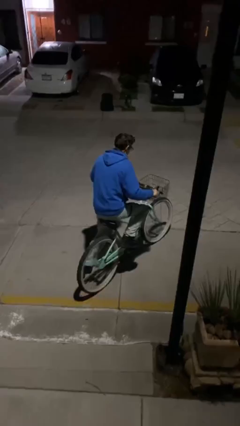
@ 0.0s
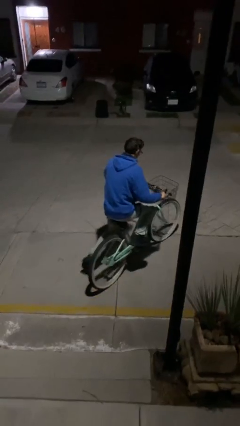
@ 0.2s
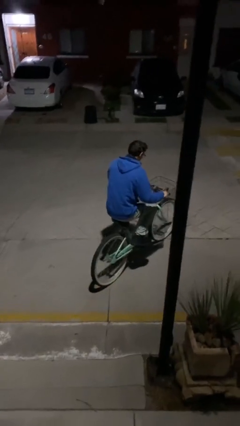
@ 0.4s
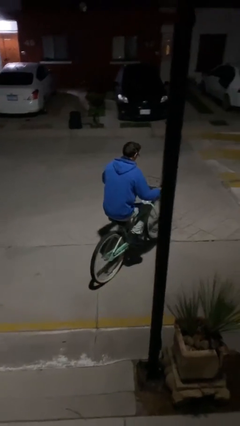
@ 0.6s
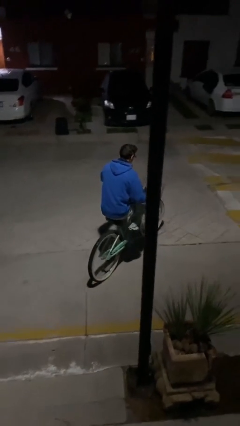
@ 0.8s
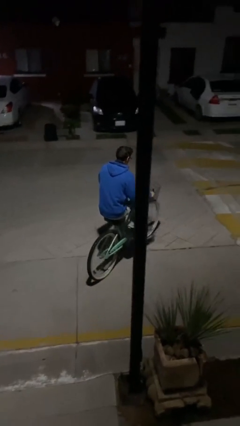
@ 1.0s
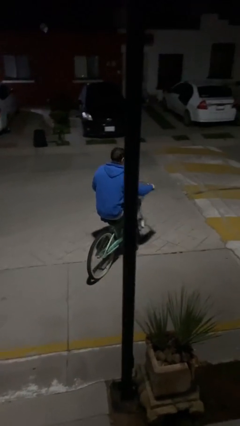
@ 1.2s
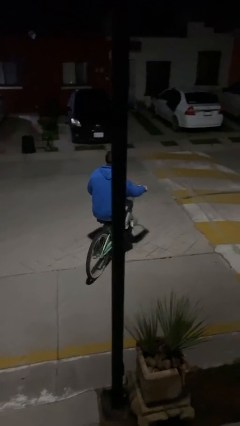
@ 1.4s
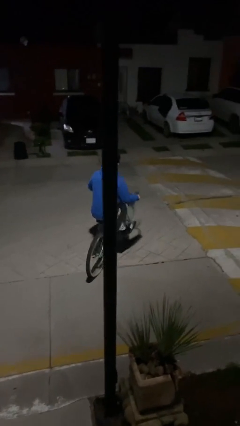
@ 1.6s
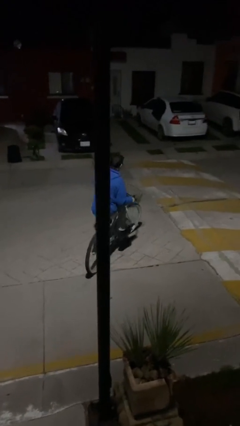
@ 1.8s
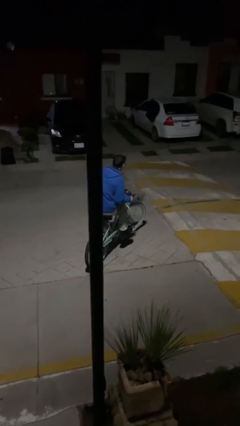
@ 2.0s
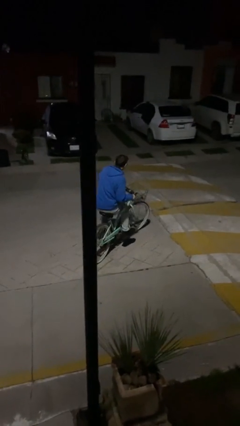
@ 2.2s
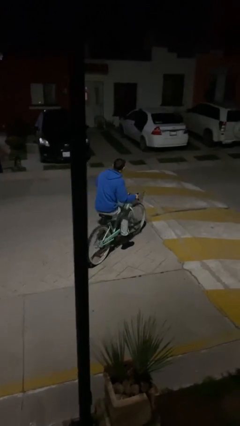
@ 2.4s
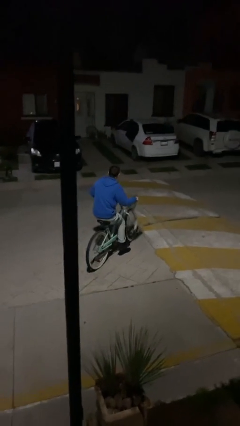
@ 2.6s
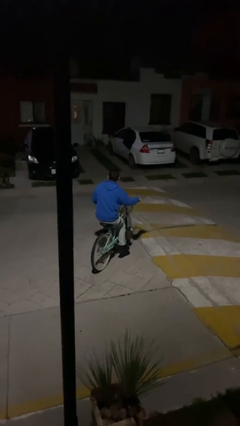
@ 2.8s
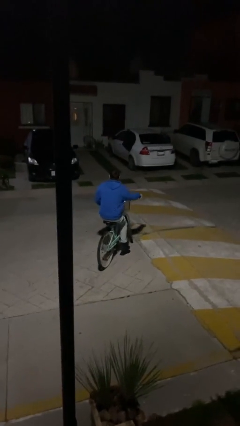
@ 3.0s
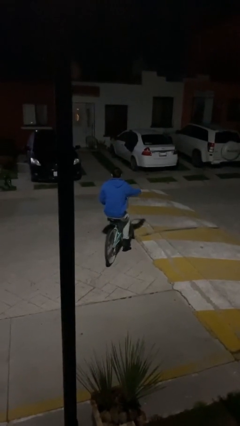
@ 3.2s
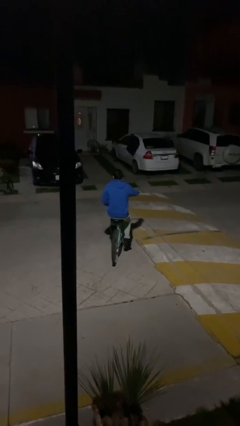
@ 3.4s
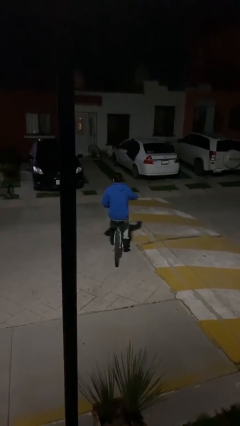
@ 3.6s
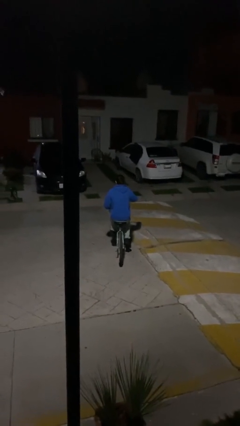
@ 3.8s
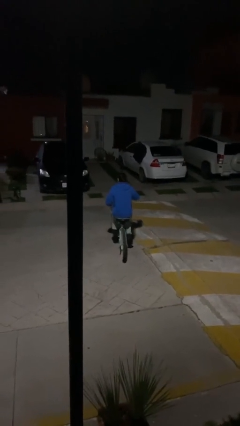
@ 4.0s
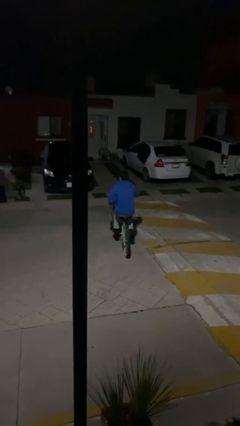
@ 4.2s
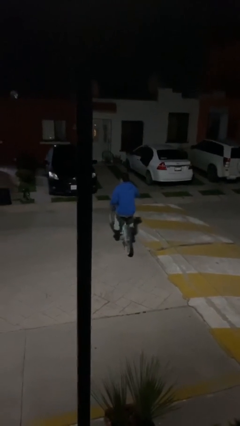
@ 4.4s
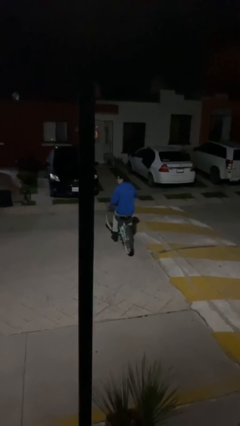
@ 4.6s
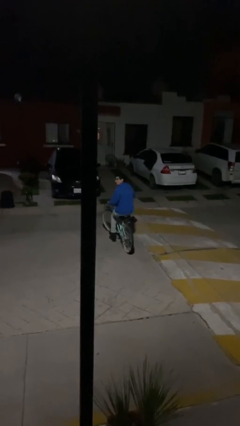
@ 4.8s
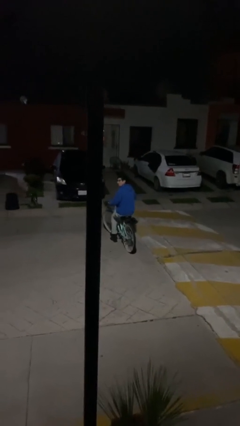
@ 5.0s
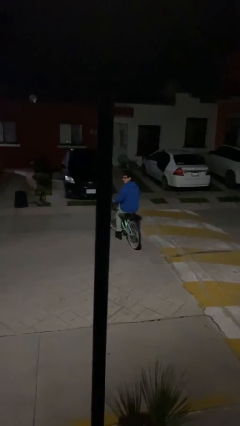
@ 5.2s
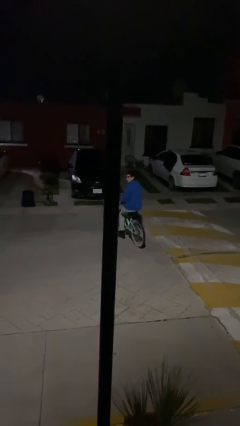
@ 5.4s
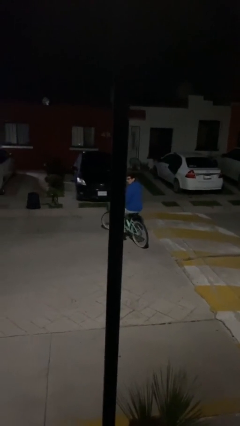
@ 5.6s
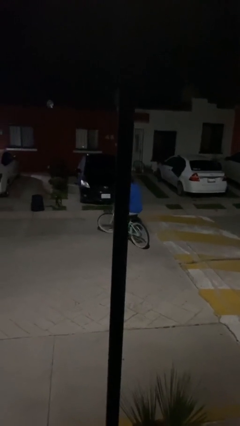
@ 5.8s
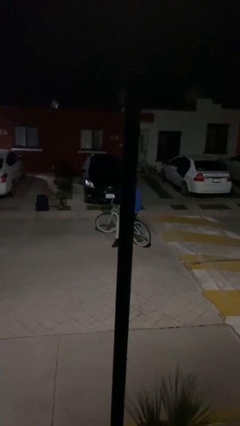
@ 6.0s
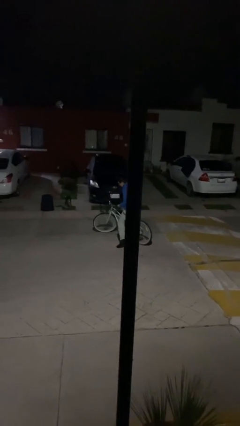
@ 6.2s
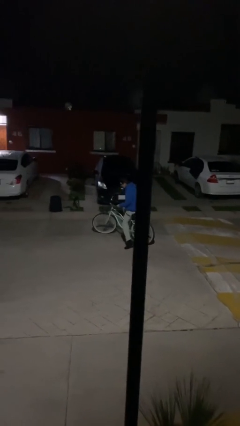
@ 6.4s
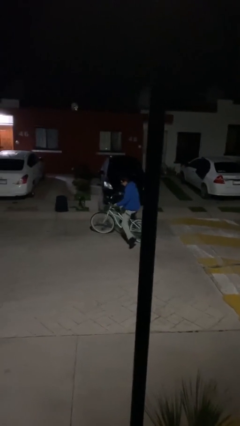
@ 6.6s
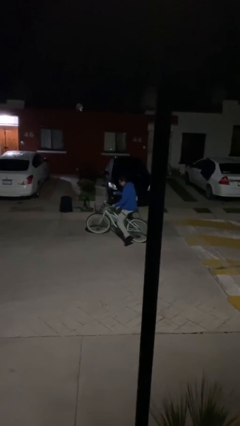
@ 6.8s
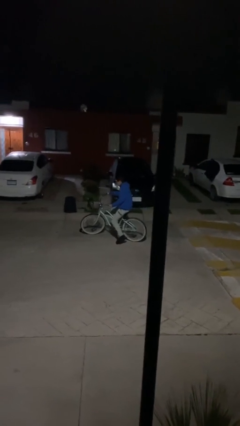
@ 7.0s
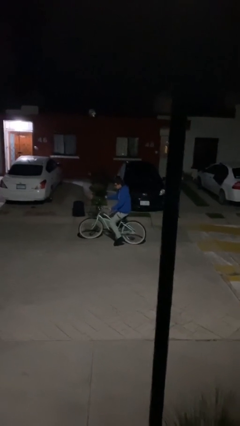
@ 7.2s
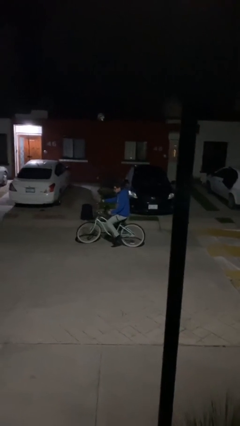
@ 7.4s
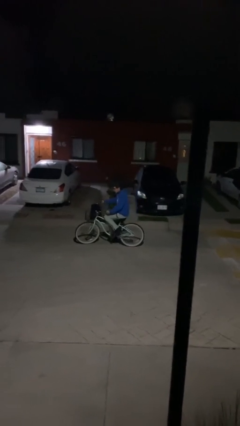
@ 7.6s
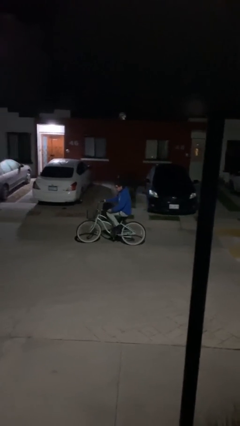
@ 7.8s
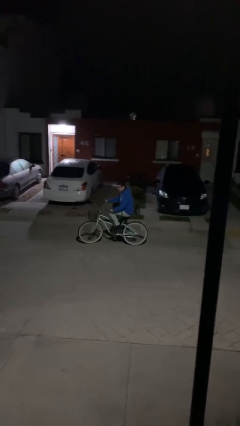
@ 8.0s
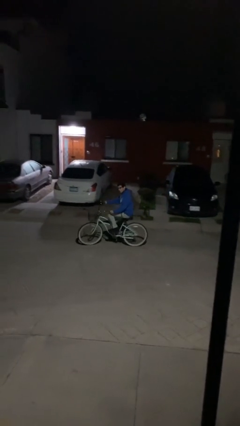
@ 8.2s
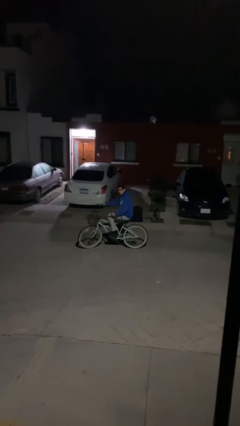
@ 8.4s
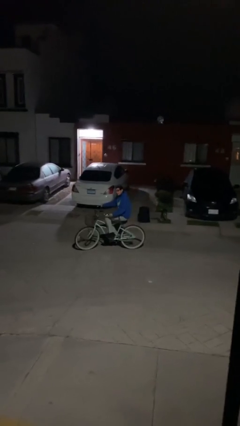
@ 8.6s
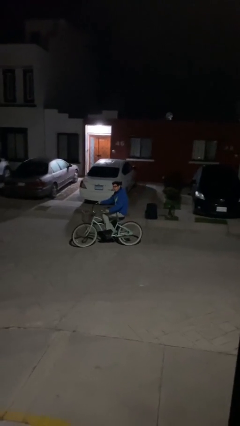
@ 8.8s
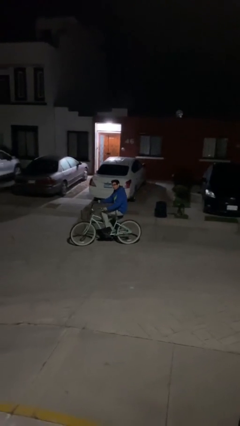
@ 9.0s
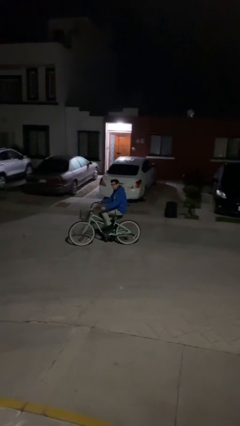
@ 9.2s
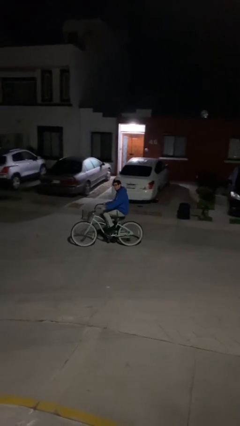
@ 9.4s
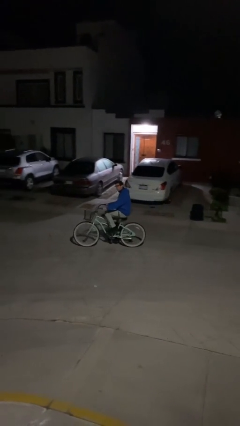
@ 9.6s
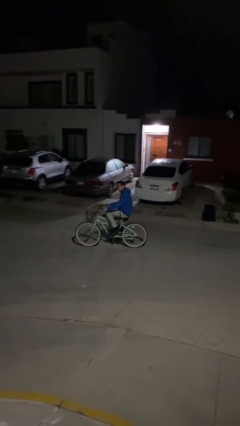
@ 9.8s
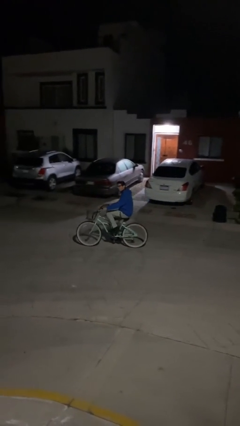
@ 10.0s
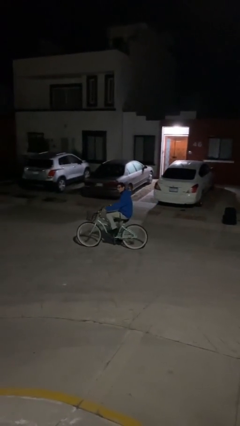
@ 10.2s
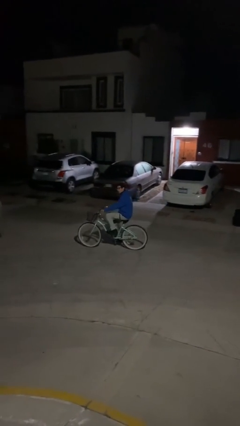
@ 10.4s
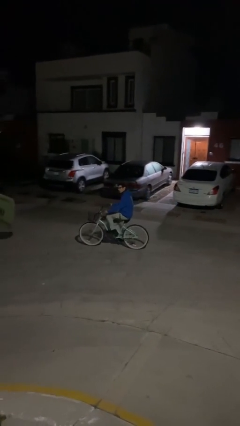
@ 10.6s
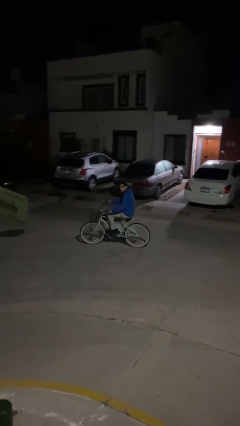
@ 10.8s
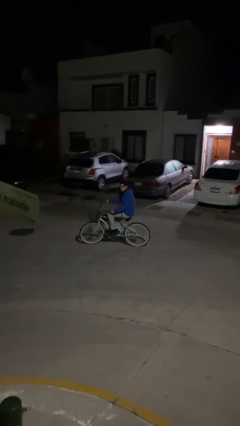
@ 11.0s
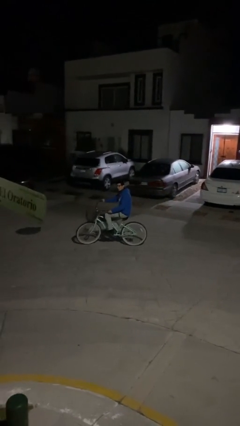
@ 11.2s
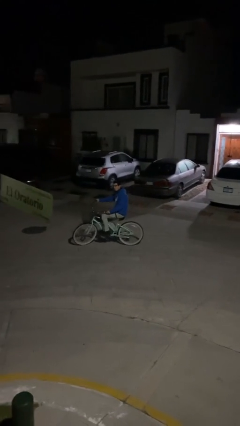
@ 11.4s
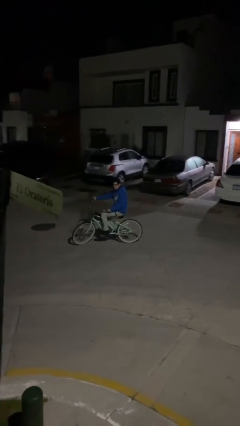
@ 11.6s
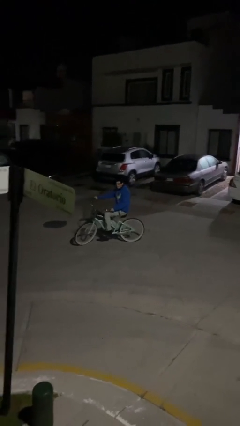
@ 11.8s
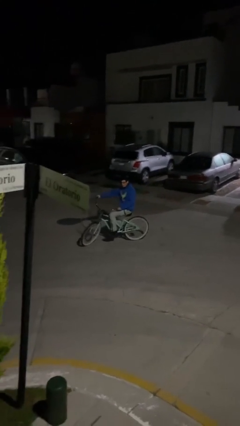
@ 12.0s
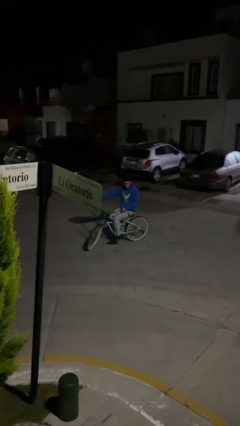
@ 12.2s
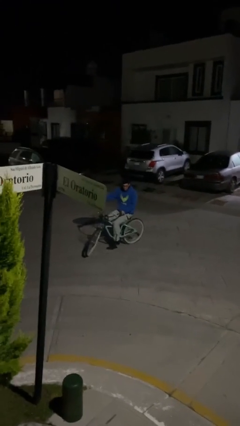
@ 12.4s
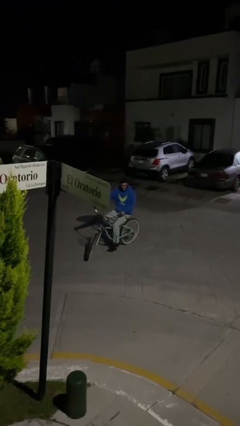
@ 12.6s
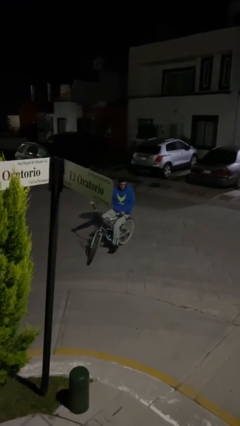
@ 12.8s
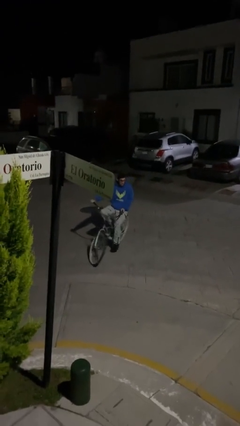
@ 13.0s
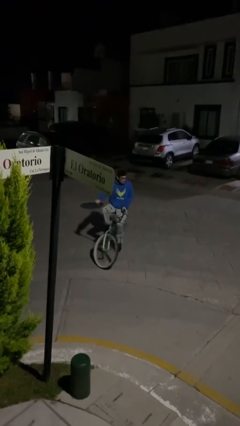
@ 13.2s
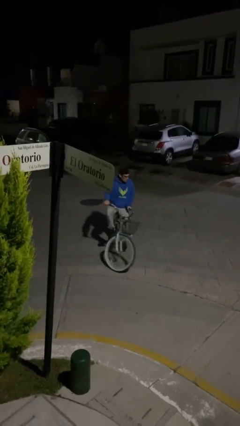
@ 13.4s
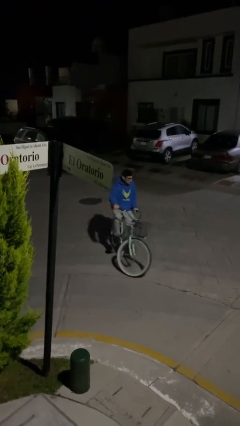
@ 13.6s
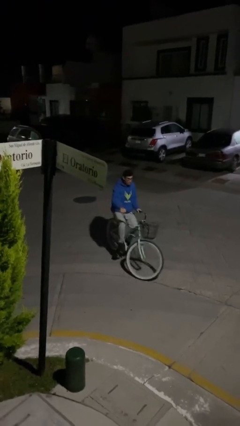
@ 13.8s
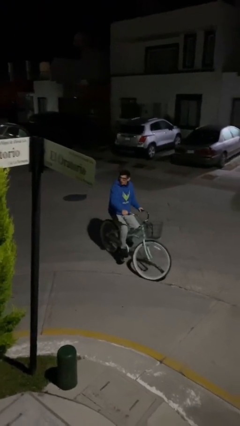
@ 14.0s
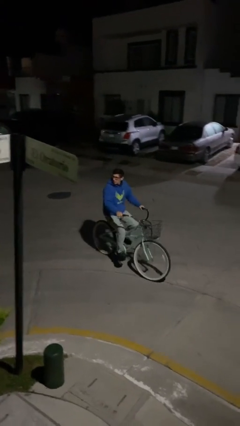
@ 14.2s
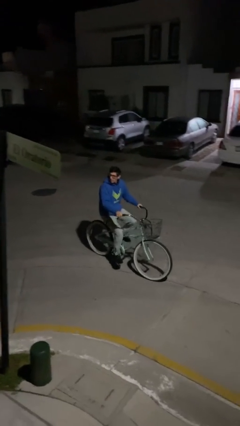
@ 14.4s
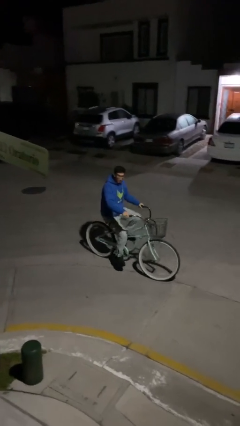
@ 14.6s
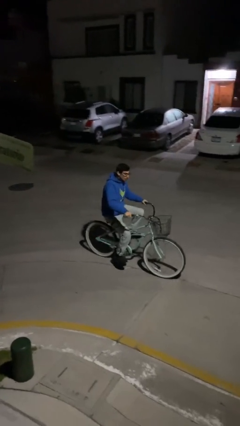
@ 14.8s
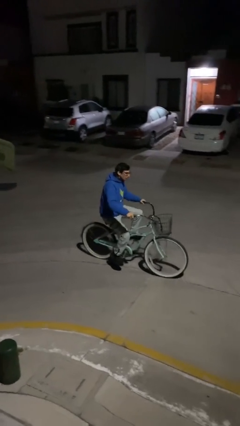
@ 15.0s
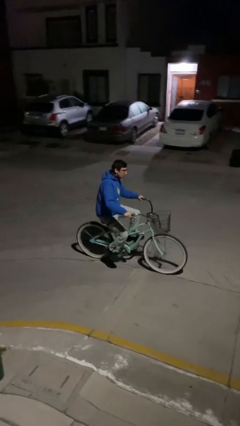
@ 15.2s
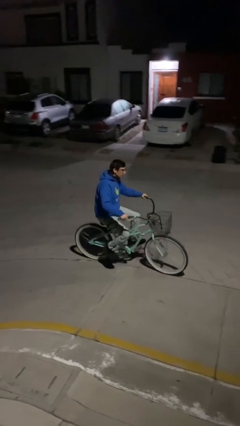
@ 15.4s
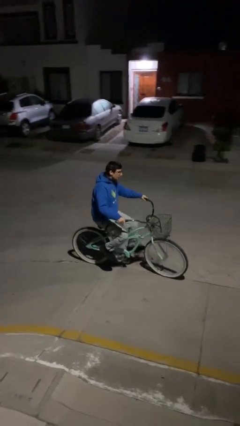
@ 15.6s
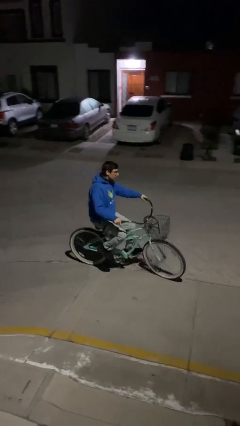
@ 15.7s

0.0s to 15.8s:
person rides bicycle

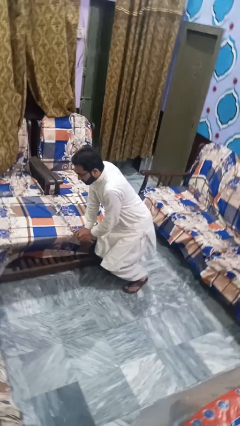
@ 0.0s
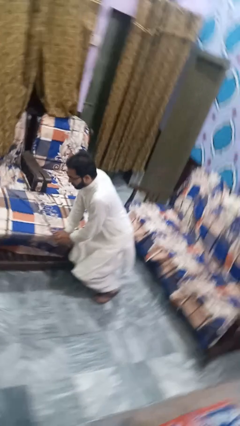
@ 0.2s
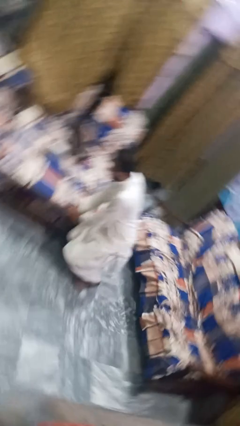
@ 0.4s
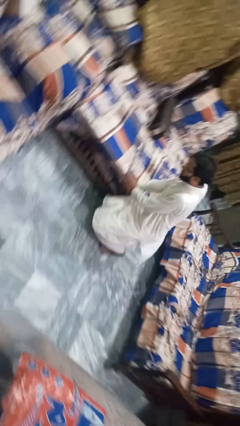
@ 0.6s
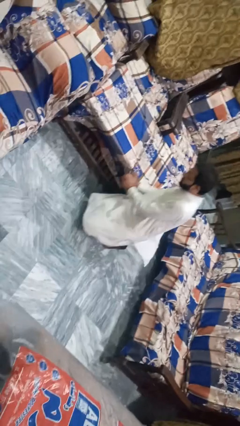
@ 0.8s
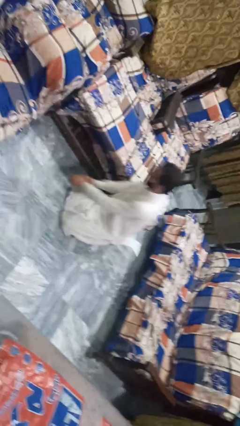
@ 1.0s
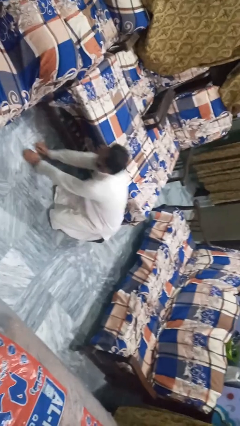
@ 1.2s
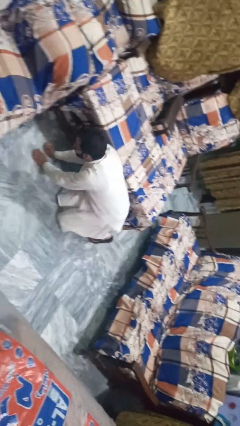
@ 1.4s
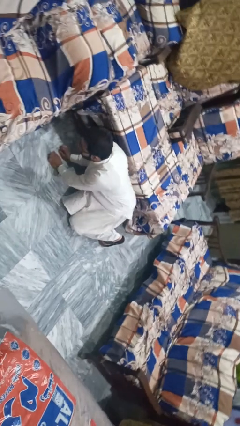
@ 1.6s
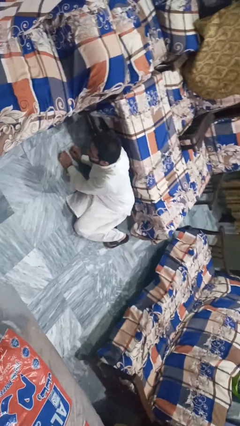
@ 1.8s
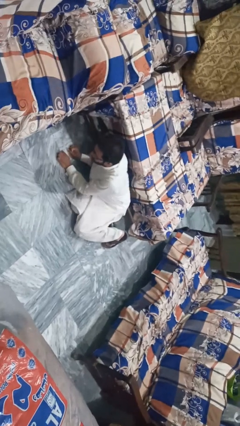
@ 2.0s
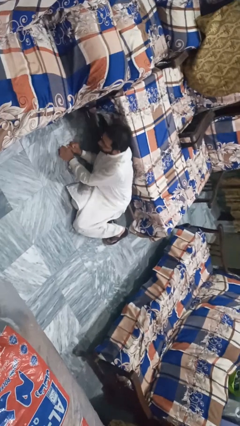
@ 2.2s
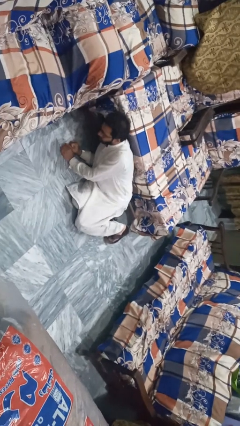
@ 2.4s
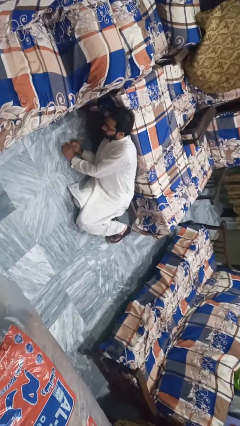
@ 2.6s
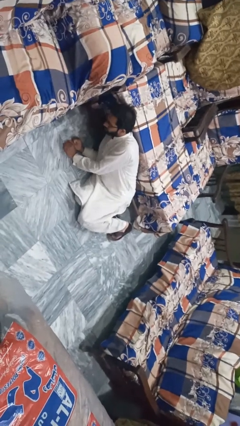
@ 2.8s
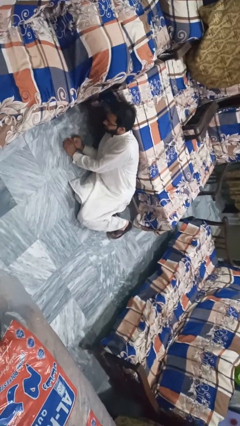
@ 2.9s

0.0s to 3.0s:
person lies down on floor
